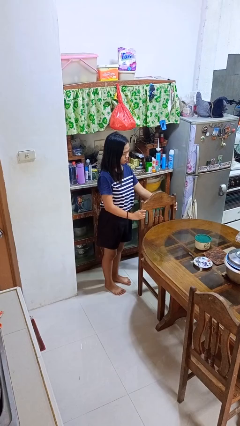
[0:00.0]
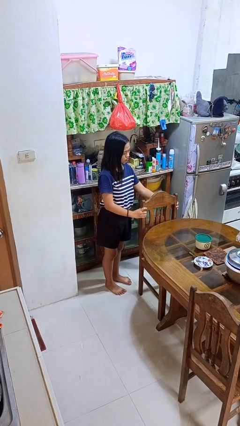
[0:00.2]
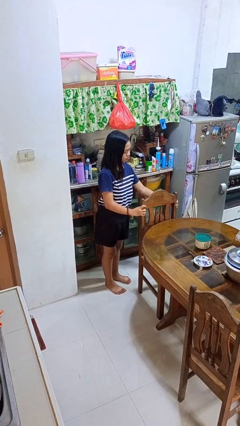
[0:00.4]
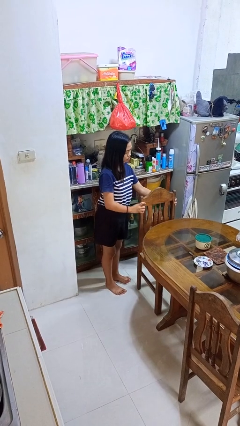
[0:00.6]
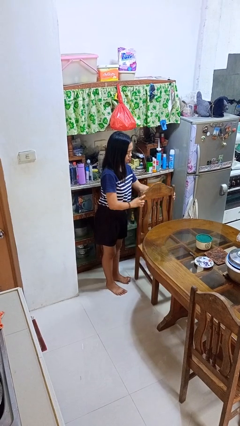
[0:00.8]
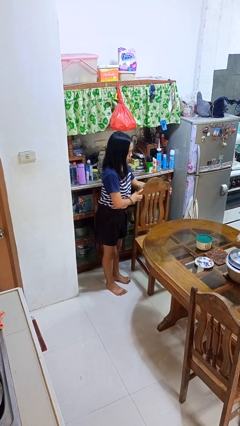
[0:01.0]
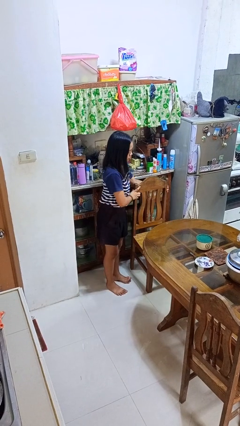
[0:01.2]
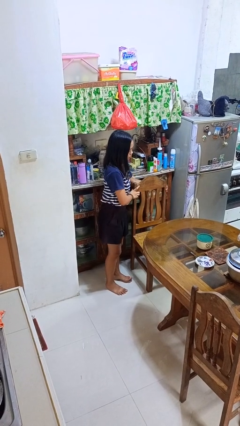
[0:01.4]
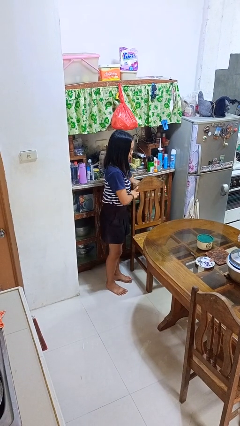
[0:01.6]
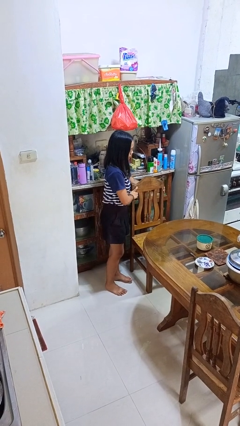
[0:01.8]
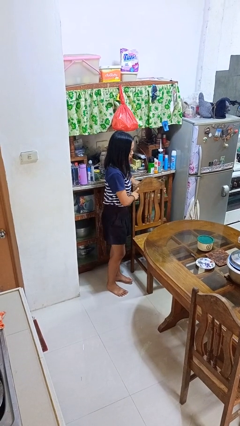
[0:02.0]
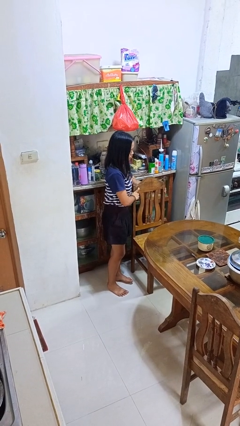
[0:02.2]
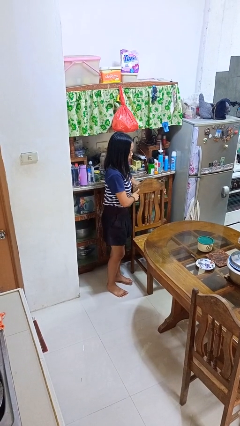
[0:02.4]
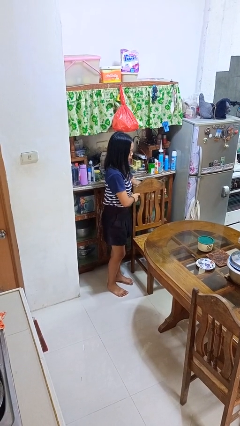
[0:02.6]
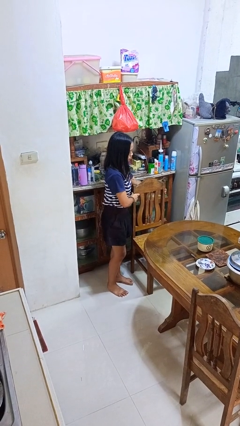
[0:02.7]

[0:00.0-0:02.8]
person pulls out chair

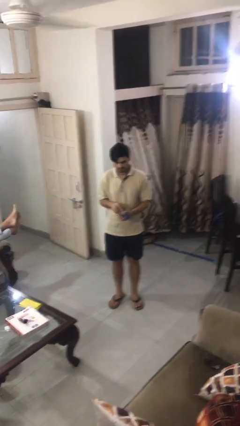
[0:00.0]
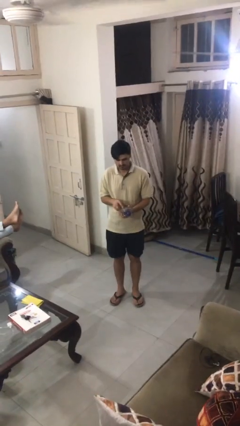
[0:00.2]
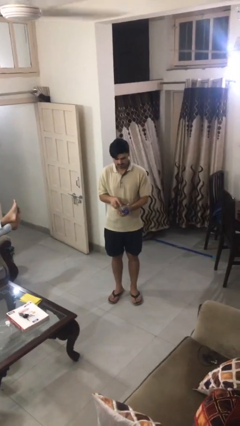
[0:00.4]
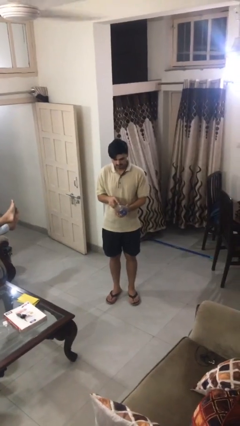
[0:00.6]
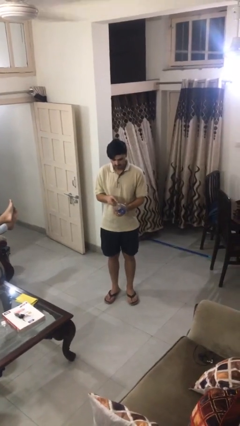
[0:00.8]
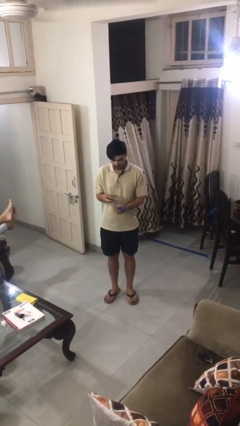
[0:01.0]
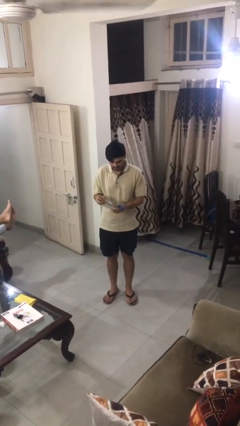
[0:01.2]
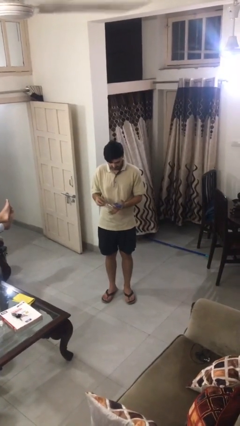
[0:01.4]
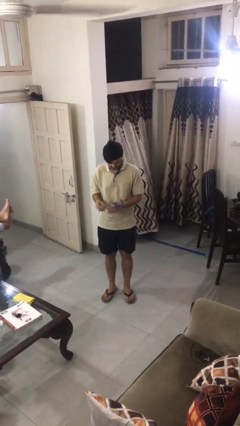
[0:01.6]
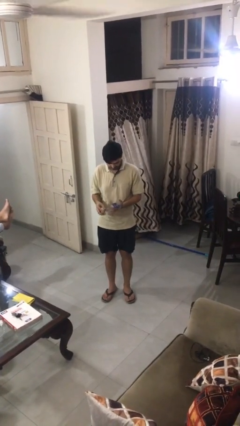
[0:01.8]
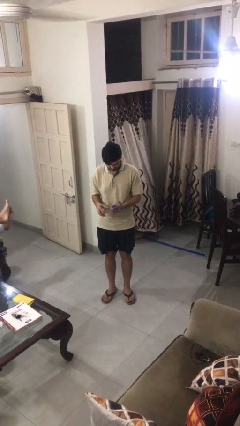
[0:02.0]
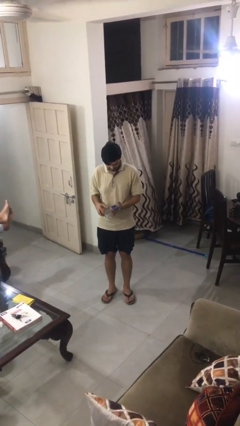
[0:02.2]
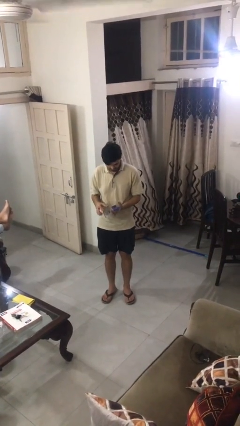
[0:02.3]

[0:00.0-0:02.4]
person opens jewelry box

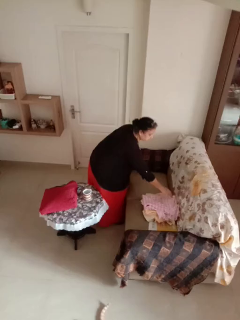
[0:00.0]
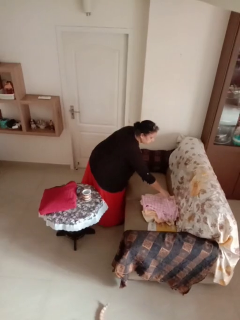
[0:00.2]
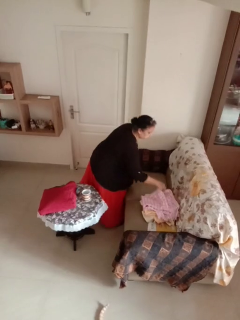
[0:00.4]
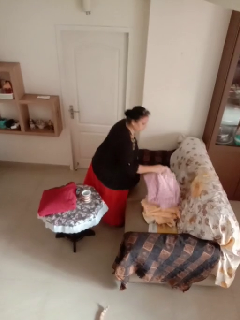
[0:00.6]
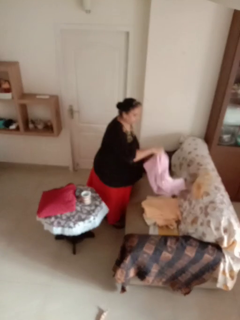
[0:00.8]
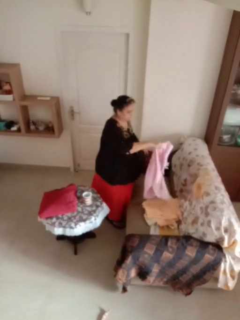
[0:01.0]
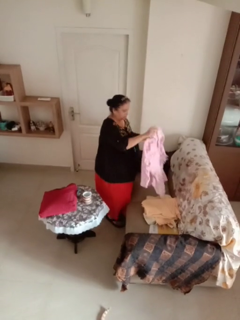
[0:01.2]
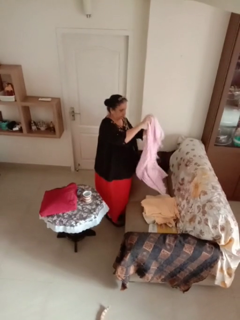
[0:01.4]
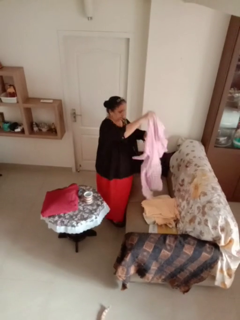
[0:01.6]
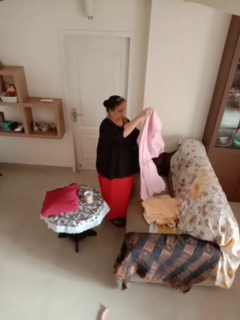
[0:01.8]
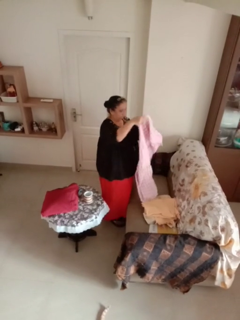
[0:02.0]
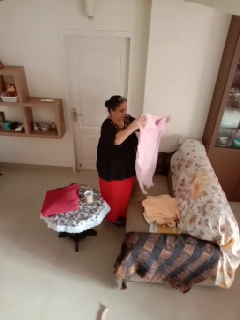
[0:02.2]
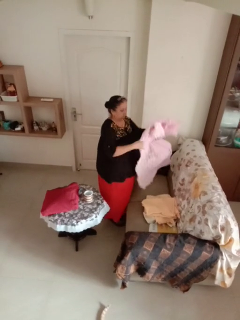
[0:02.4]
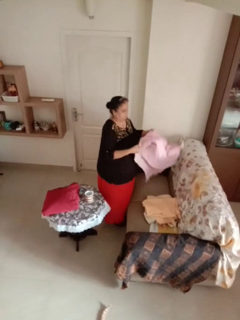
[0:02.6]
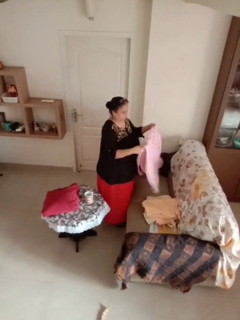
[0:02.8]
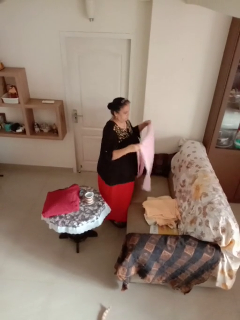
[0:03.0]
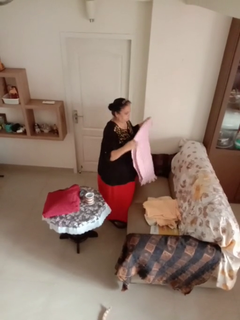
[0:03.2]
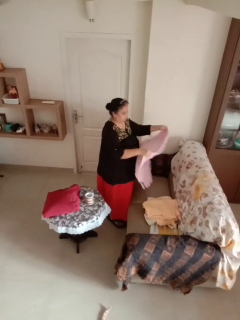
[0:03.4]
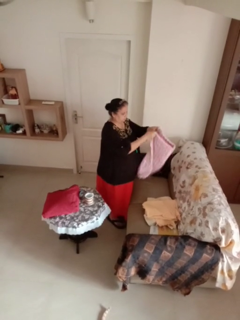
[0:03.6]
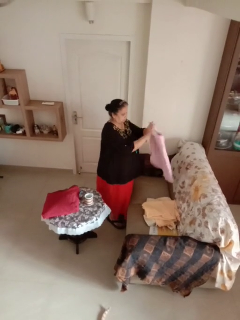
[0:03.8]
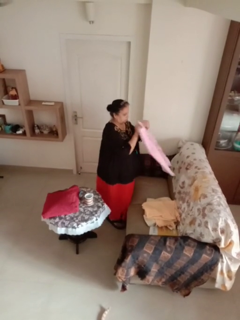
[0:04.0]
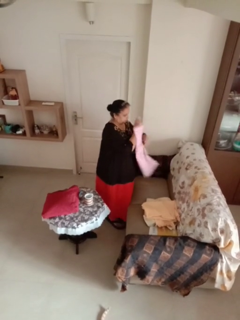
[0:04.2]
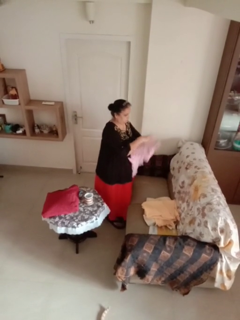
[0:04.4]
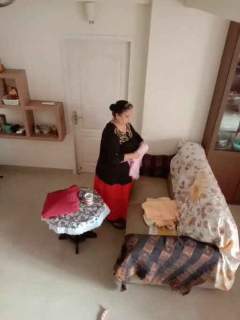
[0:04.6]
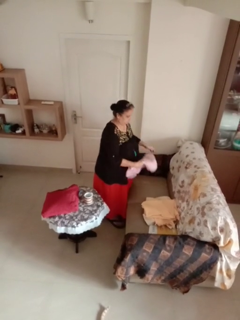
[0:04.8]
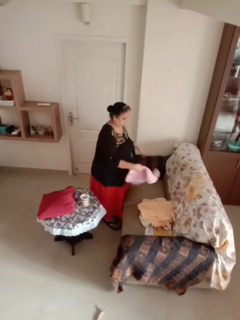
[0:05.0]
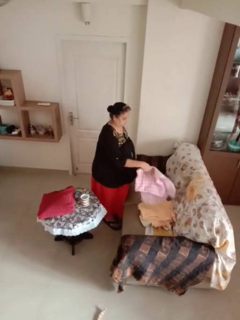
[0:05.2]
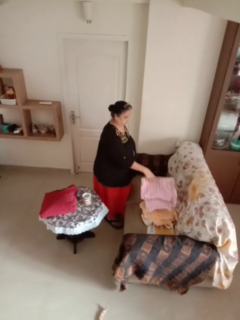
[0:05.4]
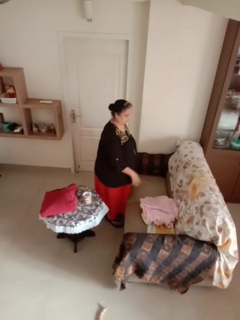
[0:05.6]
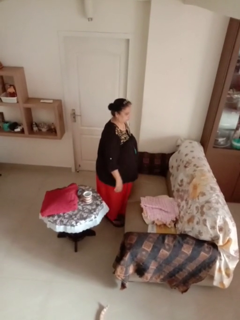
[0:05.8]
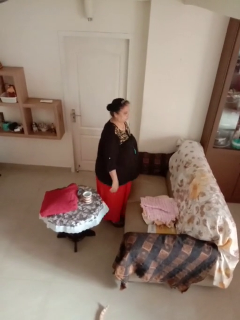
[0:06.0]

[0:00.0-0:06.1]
person folds towel

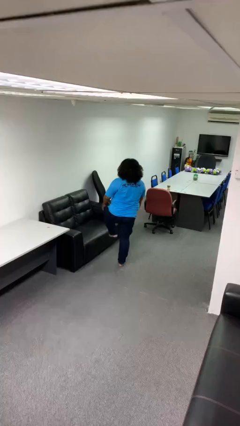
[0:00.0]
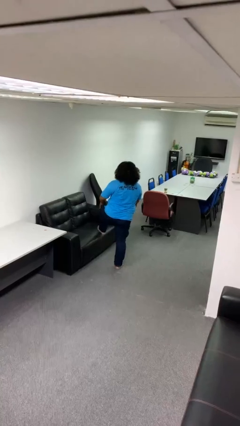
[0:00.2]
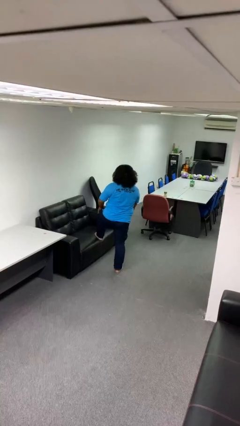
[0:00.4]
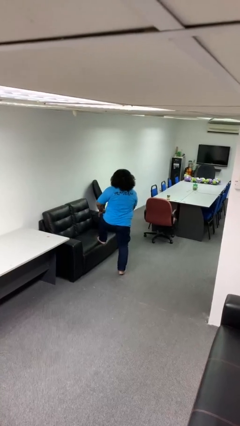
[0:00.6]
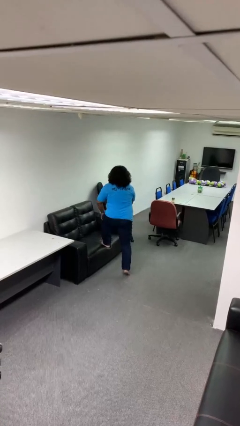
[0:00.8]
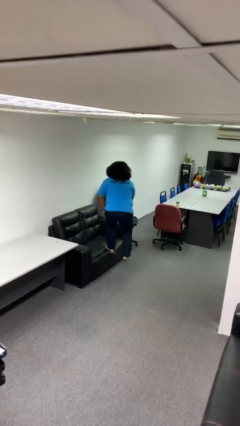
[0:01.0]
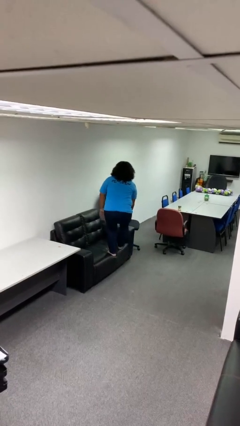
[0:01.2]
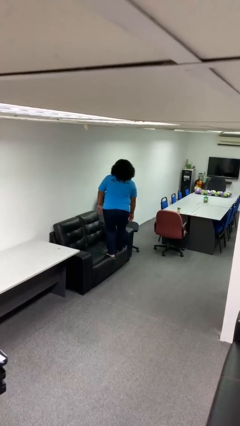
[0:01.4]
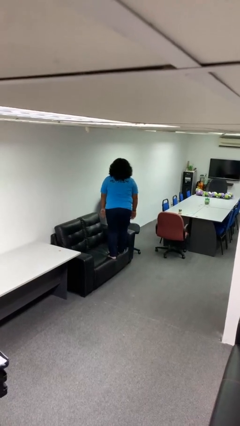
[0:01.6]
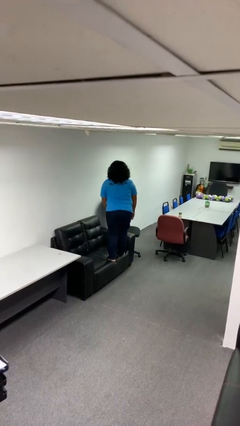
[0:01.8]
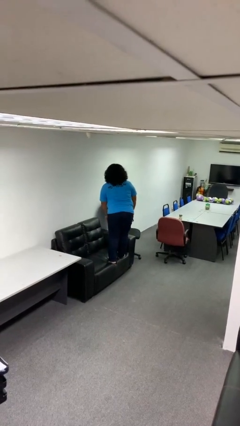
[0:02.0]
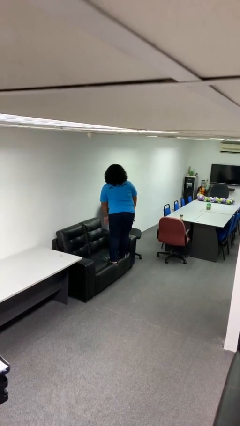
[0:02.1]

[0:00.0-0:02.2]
person climbs on couch

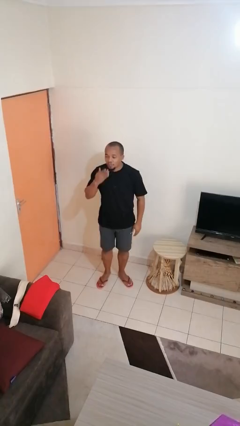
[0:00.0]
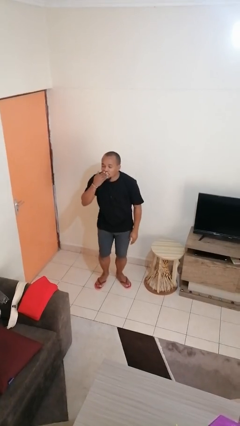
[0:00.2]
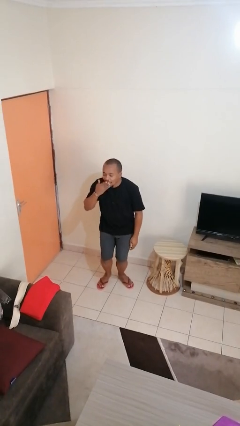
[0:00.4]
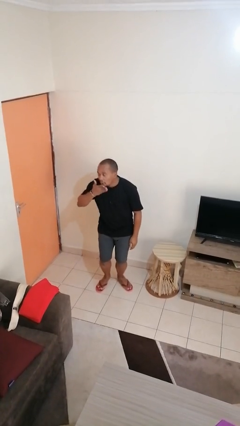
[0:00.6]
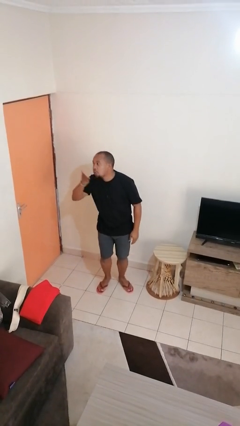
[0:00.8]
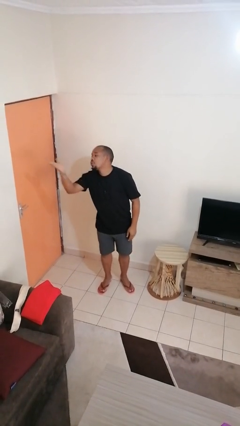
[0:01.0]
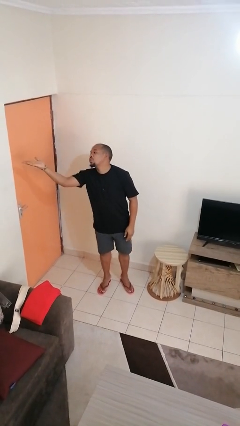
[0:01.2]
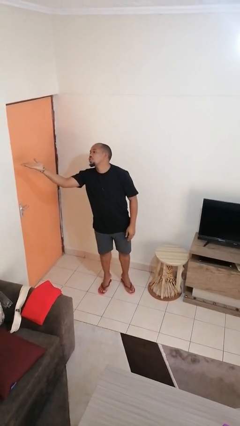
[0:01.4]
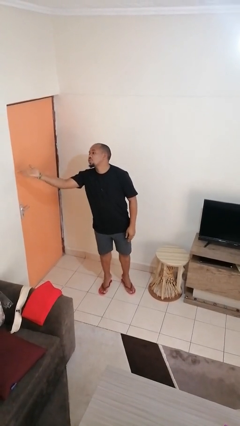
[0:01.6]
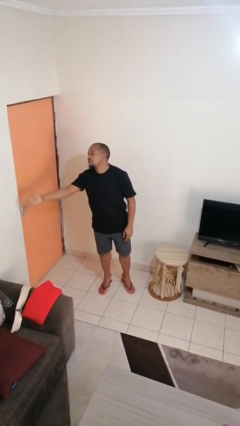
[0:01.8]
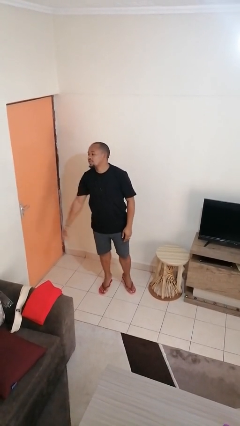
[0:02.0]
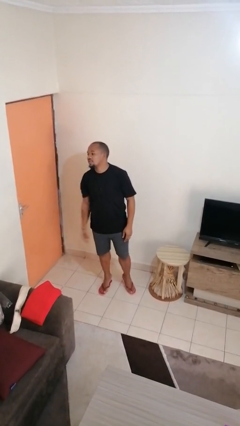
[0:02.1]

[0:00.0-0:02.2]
person gestures blow kiss

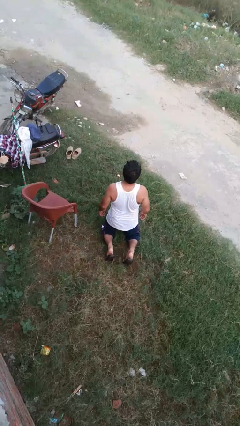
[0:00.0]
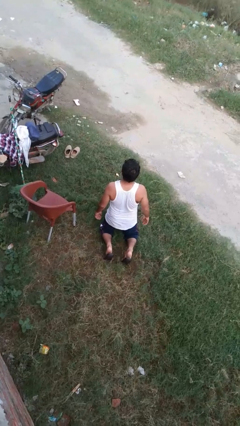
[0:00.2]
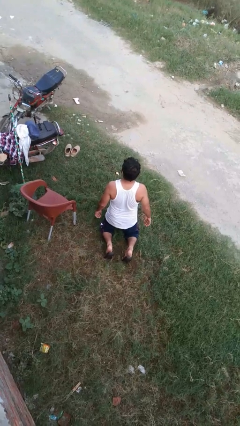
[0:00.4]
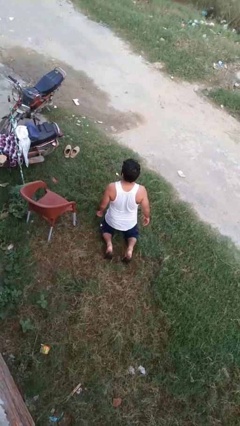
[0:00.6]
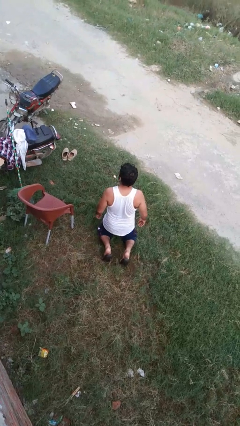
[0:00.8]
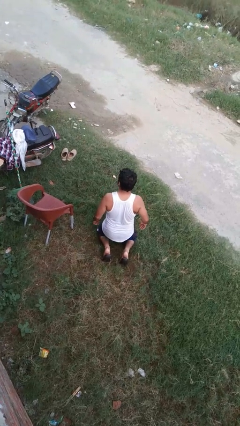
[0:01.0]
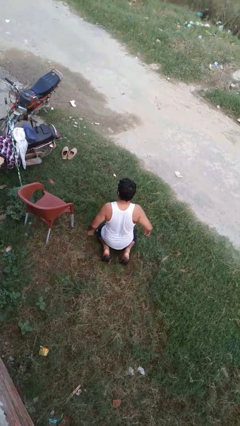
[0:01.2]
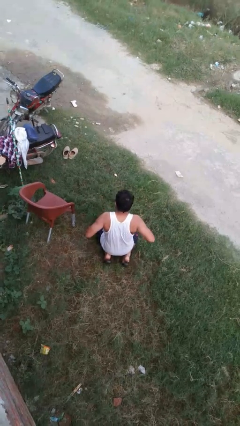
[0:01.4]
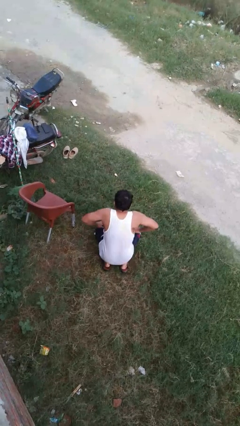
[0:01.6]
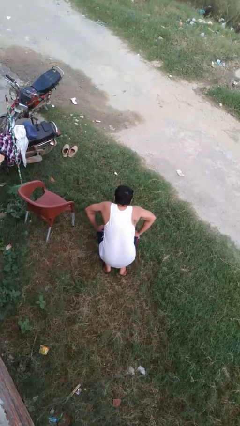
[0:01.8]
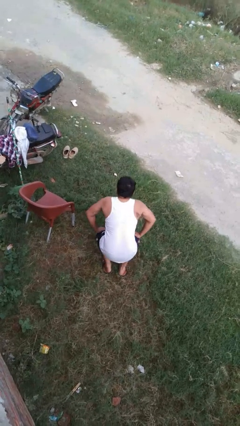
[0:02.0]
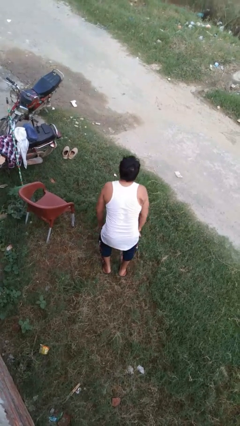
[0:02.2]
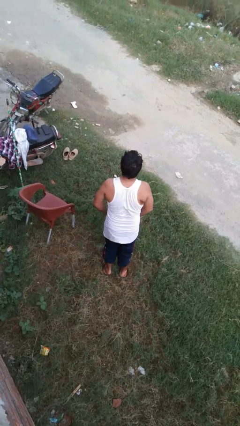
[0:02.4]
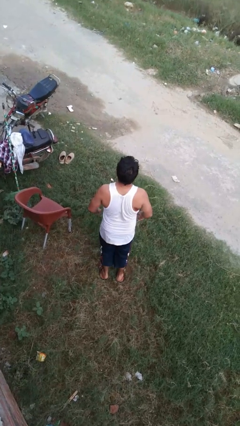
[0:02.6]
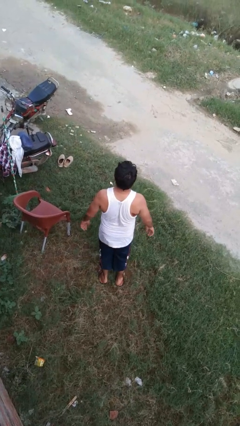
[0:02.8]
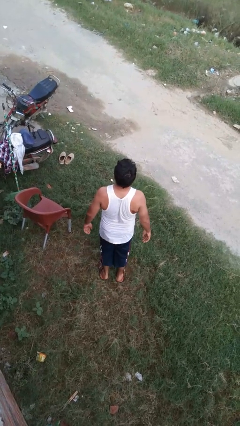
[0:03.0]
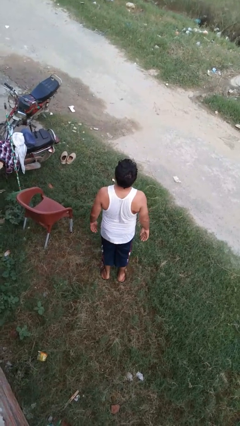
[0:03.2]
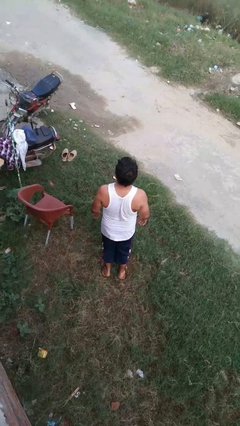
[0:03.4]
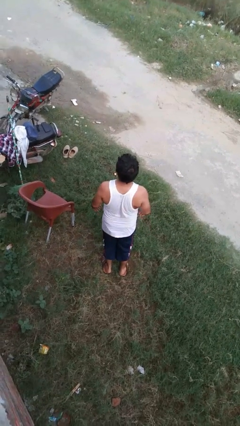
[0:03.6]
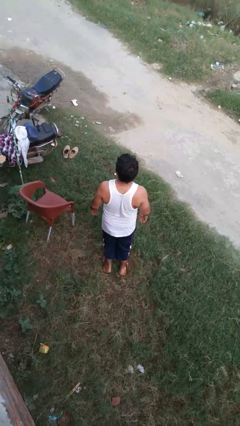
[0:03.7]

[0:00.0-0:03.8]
person stands up from floor
